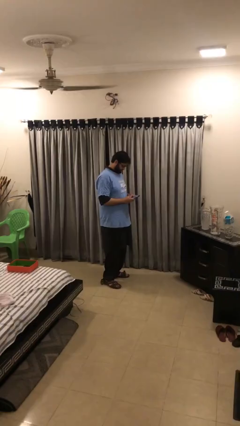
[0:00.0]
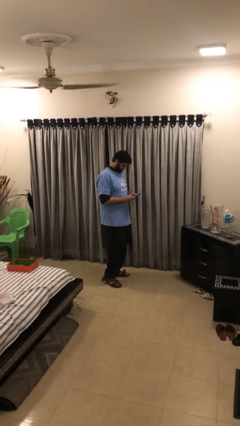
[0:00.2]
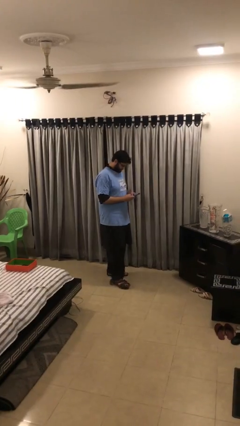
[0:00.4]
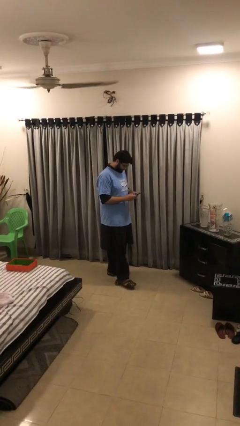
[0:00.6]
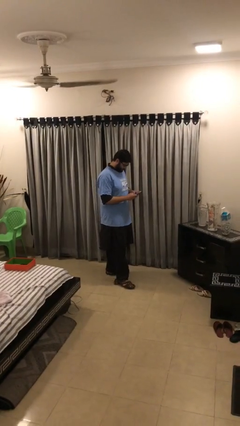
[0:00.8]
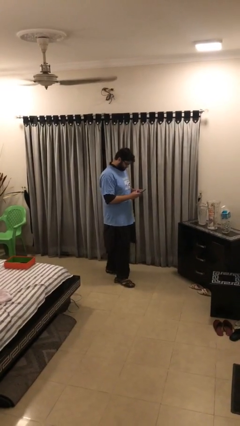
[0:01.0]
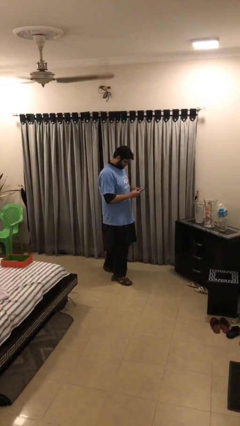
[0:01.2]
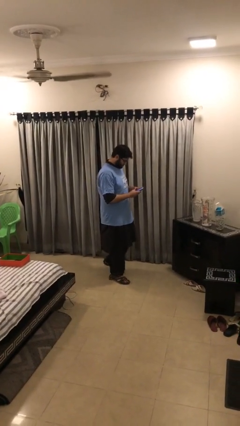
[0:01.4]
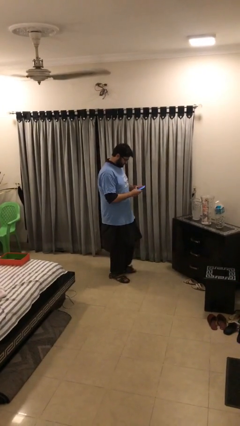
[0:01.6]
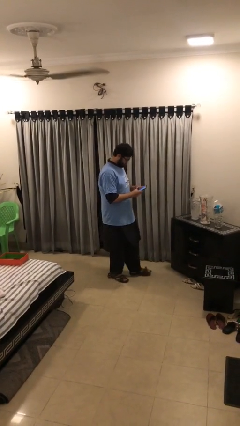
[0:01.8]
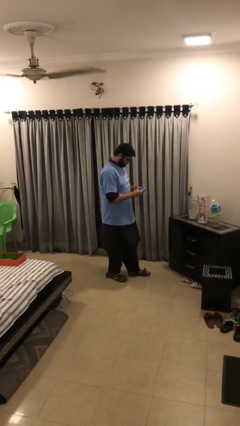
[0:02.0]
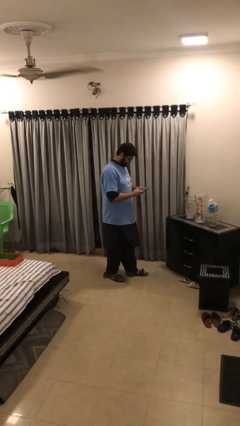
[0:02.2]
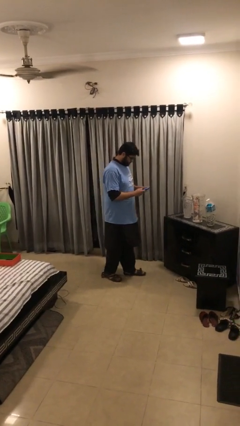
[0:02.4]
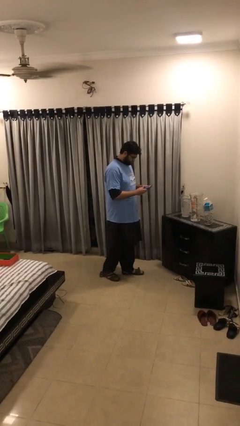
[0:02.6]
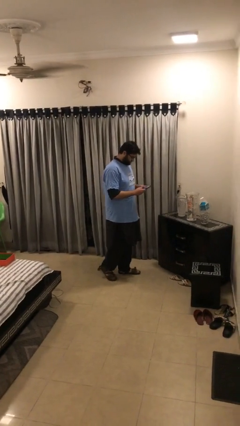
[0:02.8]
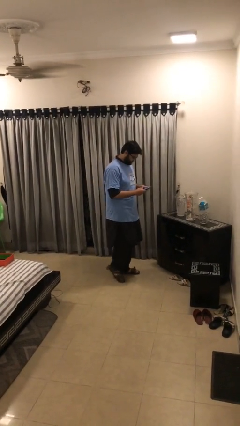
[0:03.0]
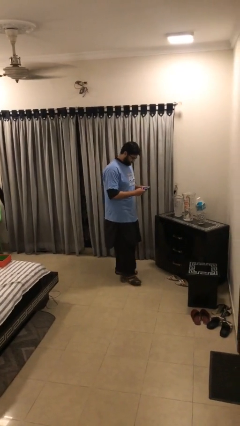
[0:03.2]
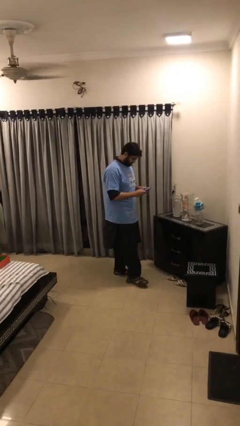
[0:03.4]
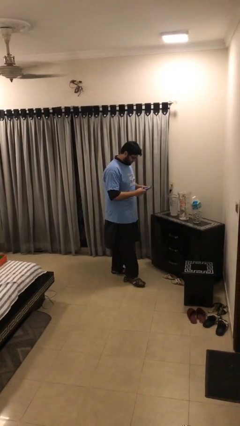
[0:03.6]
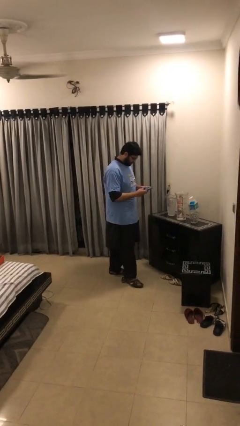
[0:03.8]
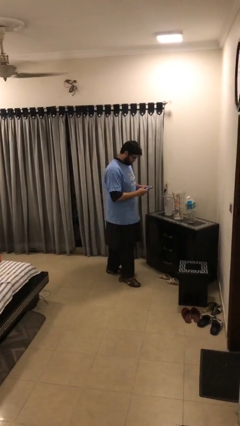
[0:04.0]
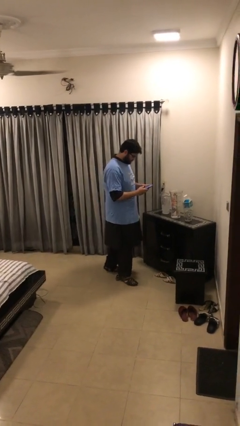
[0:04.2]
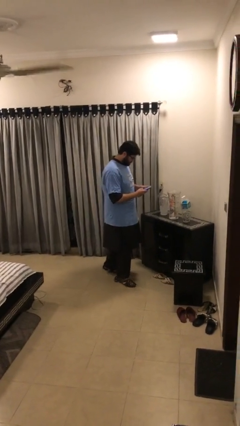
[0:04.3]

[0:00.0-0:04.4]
person texts on phone

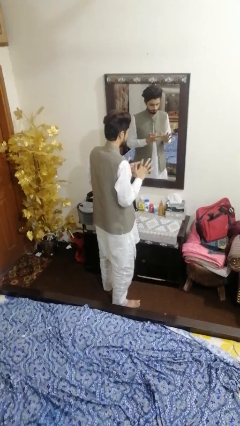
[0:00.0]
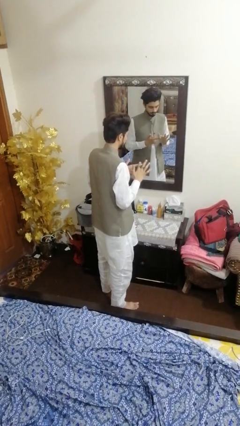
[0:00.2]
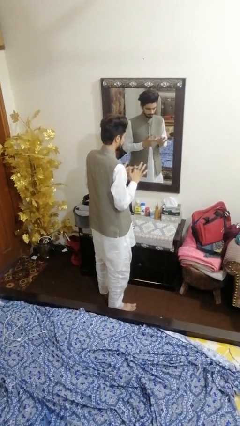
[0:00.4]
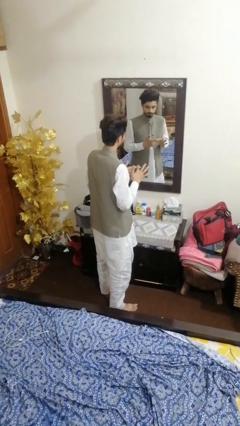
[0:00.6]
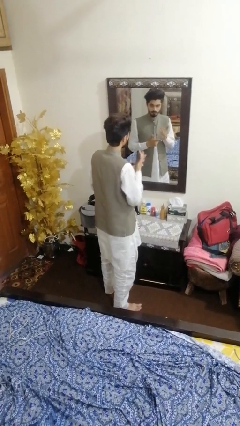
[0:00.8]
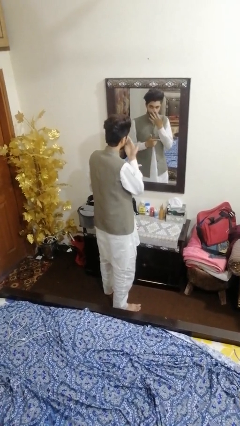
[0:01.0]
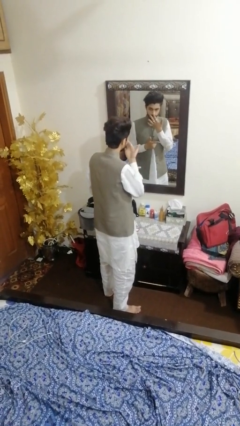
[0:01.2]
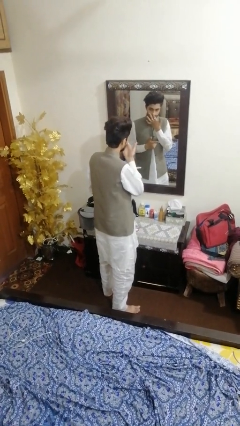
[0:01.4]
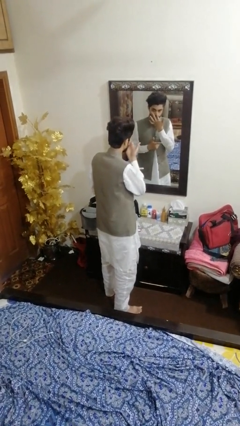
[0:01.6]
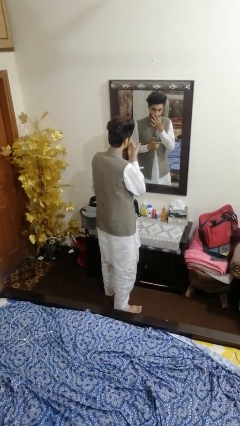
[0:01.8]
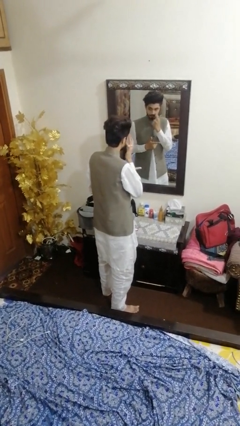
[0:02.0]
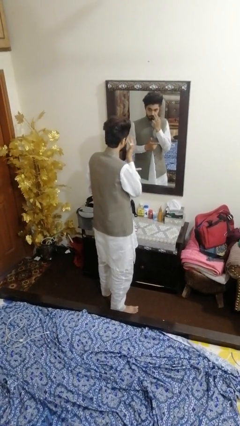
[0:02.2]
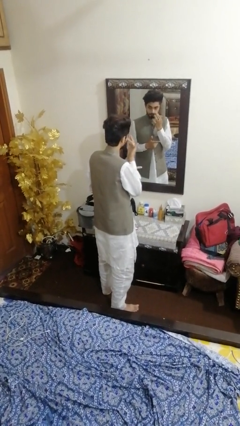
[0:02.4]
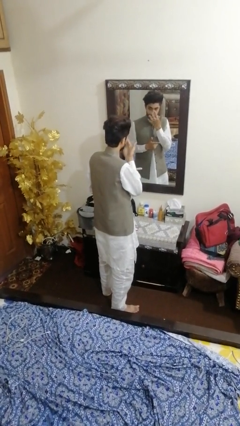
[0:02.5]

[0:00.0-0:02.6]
person applies foundation makeup

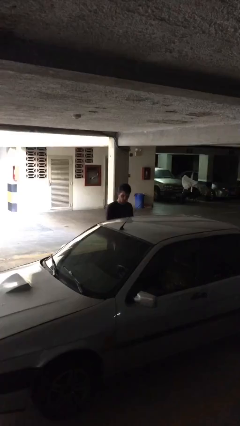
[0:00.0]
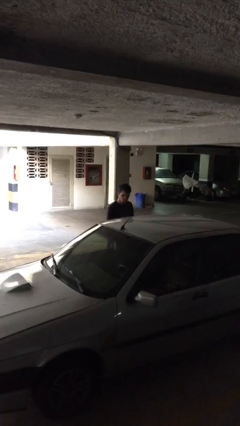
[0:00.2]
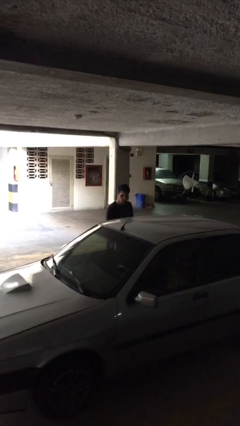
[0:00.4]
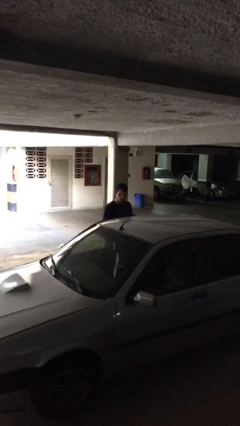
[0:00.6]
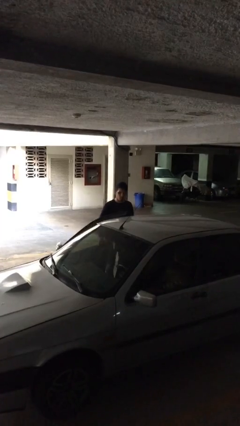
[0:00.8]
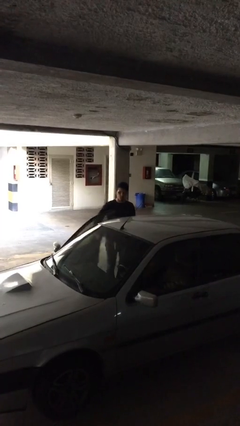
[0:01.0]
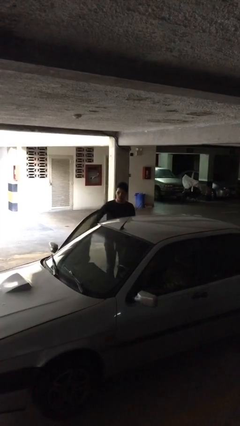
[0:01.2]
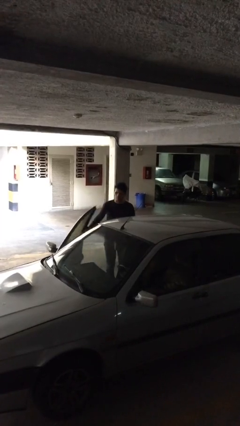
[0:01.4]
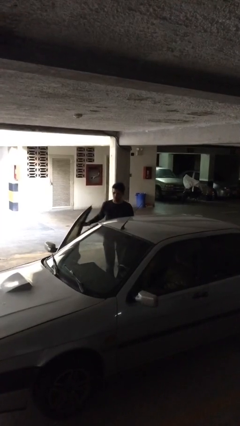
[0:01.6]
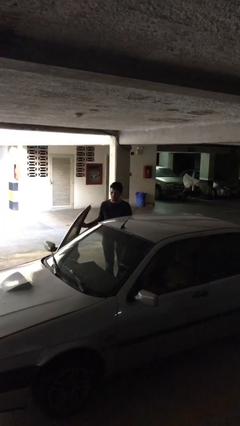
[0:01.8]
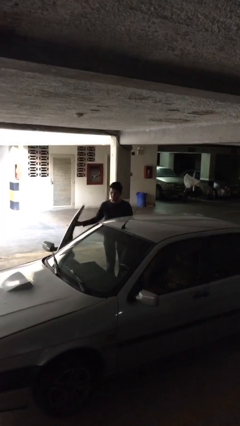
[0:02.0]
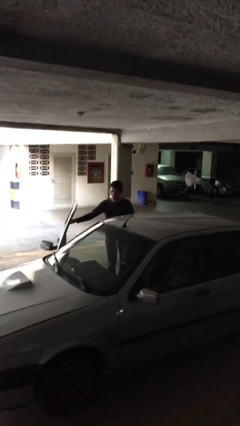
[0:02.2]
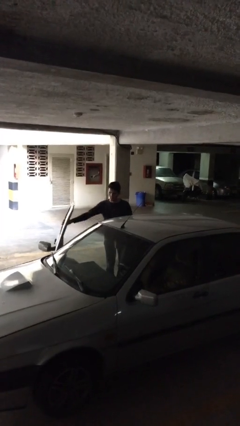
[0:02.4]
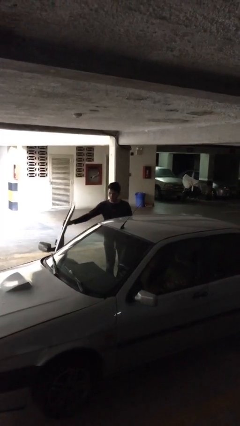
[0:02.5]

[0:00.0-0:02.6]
person opens car door

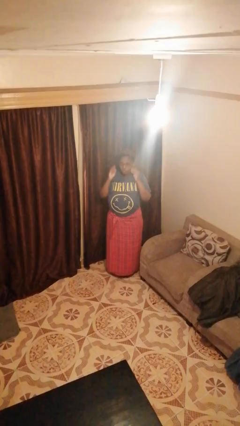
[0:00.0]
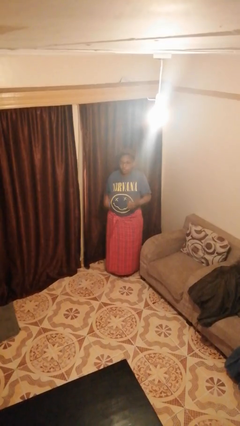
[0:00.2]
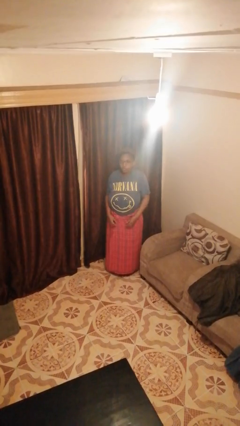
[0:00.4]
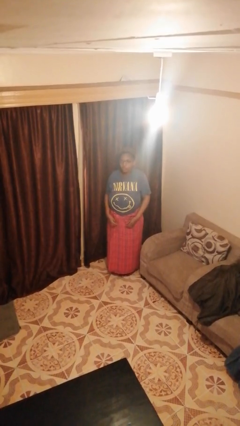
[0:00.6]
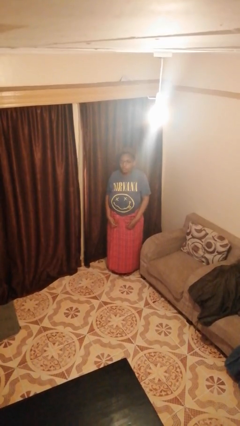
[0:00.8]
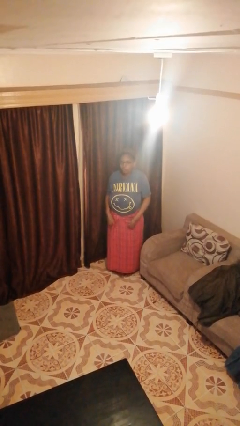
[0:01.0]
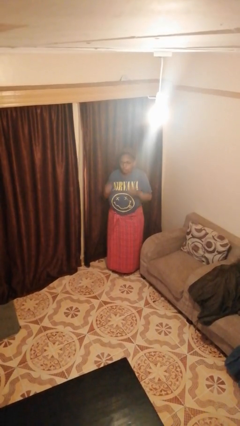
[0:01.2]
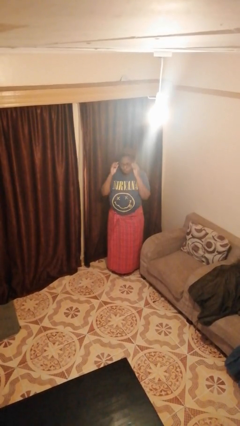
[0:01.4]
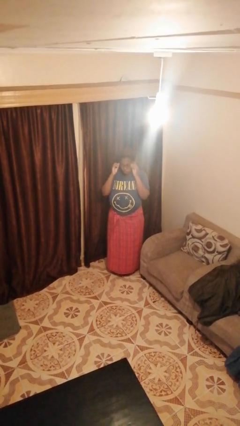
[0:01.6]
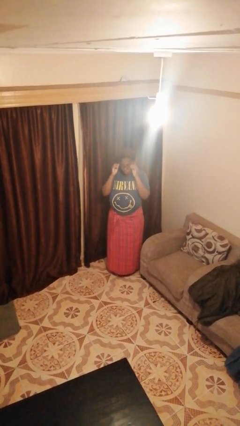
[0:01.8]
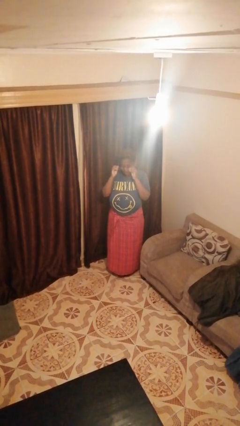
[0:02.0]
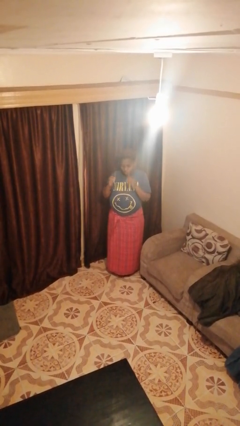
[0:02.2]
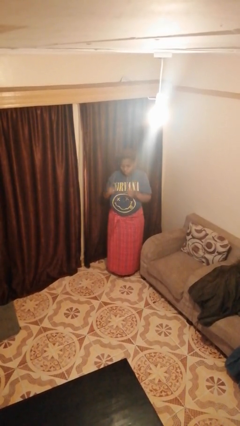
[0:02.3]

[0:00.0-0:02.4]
person takes off glasses

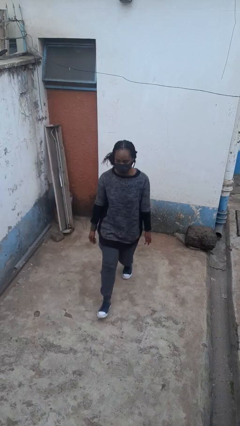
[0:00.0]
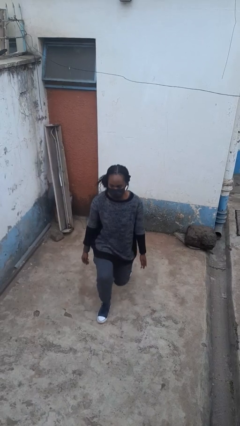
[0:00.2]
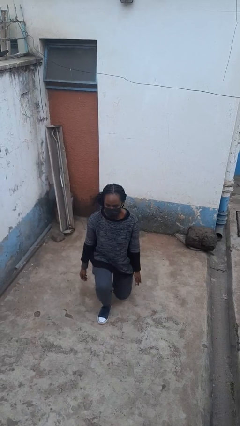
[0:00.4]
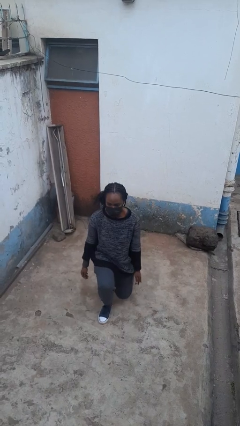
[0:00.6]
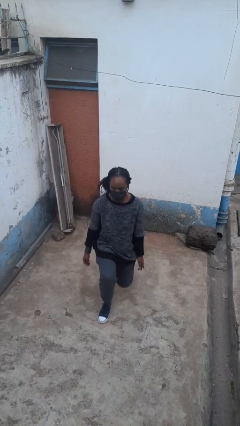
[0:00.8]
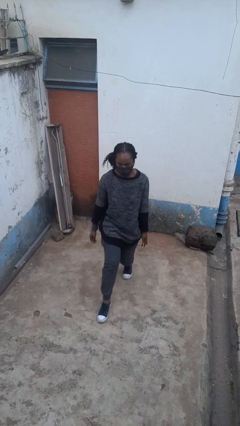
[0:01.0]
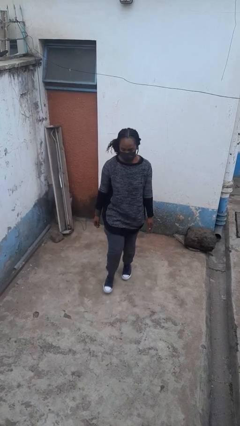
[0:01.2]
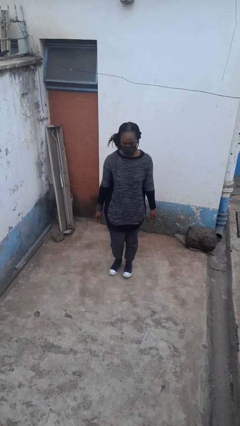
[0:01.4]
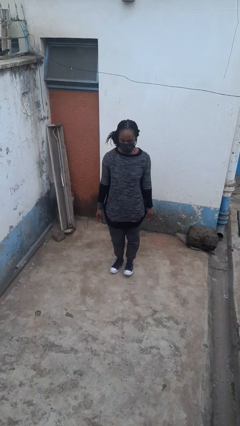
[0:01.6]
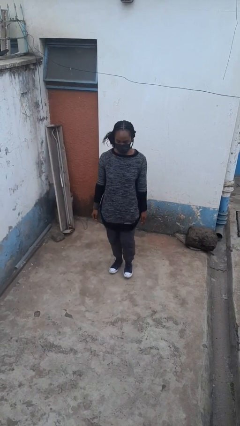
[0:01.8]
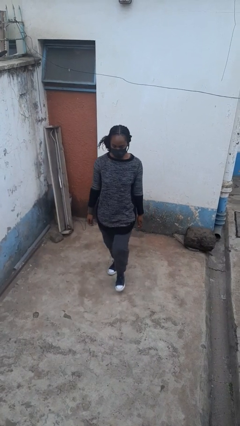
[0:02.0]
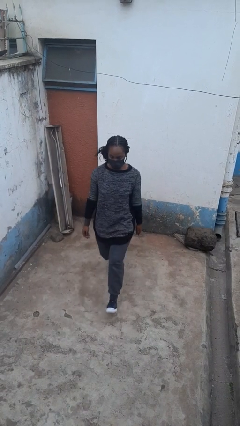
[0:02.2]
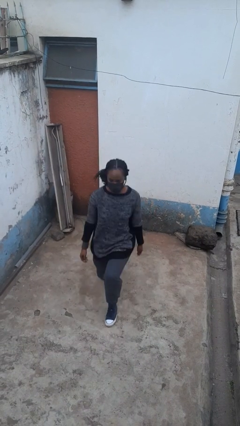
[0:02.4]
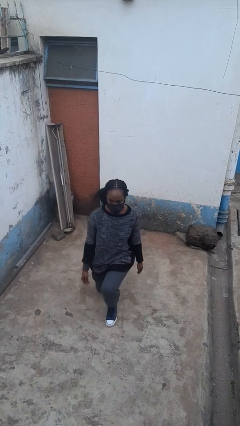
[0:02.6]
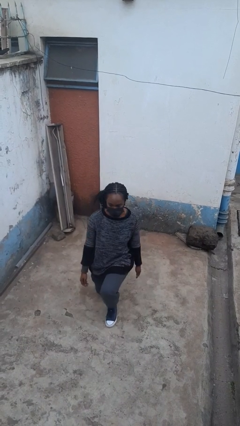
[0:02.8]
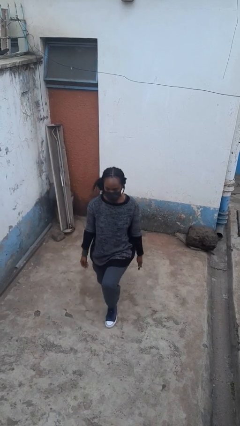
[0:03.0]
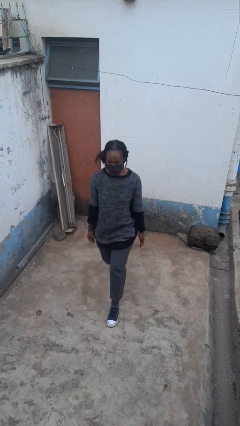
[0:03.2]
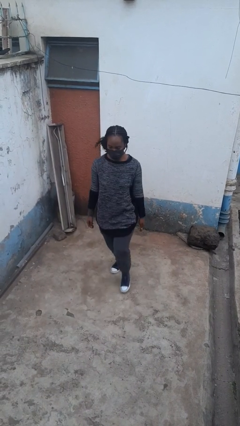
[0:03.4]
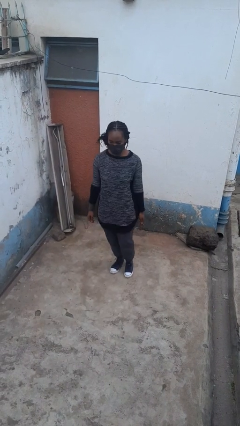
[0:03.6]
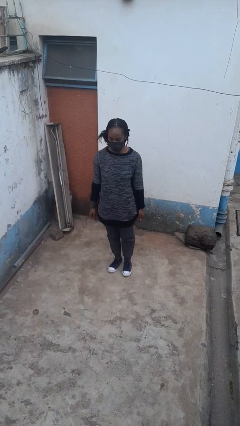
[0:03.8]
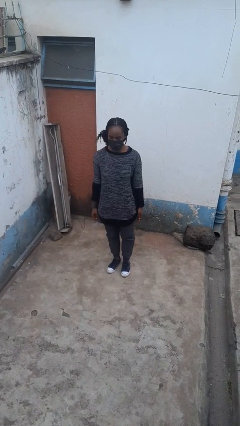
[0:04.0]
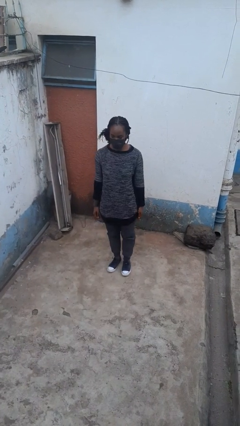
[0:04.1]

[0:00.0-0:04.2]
person exercises with lunges

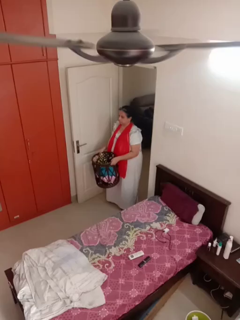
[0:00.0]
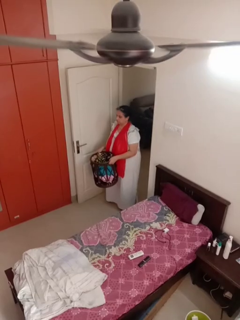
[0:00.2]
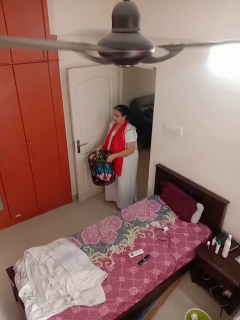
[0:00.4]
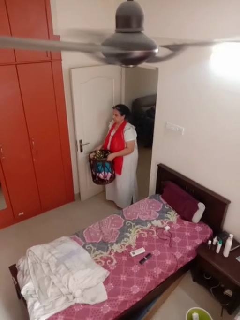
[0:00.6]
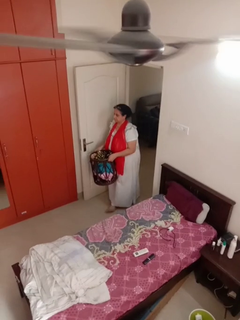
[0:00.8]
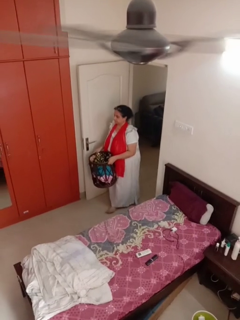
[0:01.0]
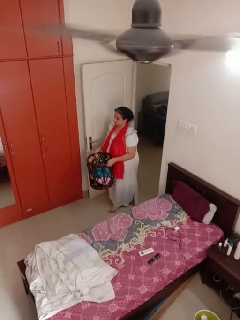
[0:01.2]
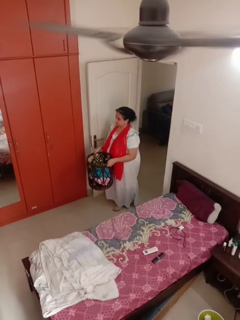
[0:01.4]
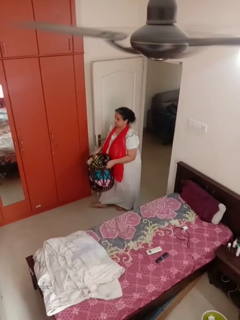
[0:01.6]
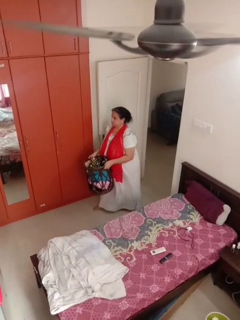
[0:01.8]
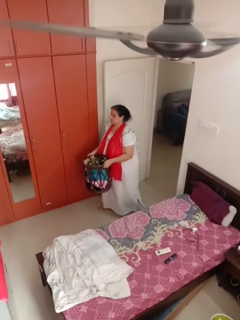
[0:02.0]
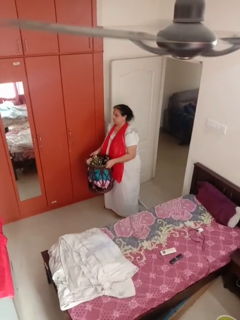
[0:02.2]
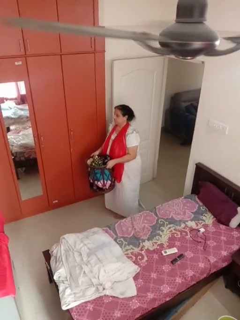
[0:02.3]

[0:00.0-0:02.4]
person carries laundry basket
